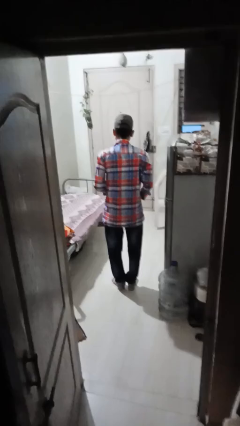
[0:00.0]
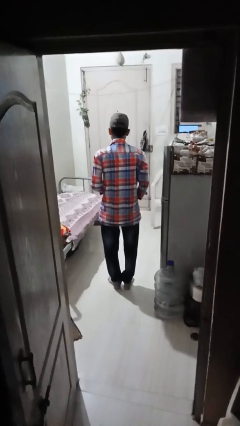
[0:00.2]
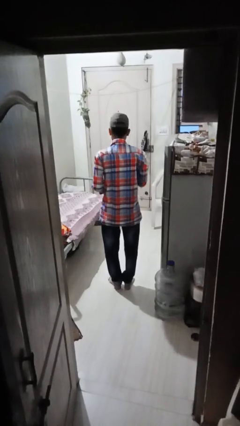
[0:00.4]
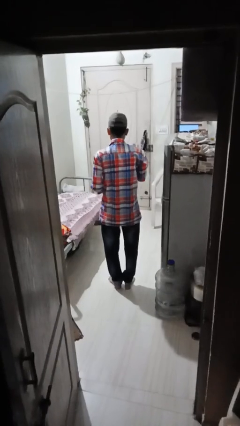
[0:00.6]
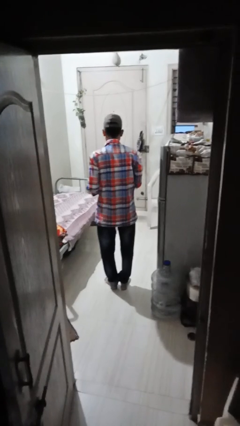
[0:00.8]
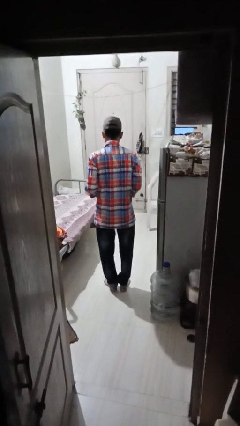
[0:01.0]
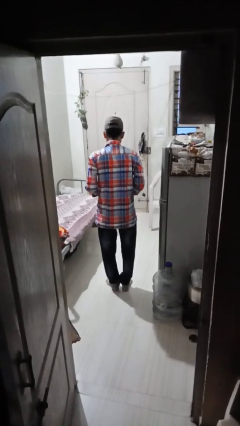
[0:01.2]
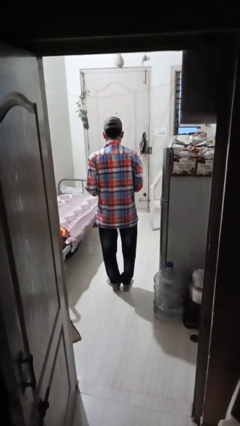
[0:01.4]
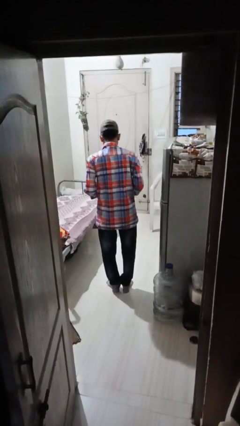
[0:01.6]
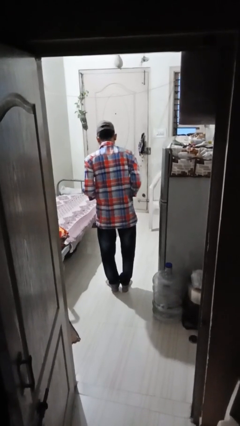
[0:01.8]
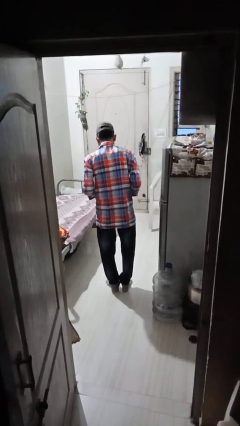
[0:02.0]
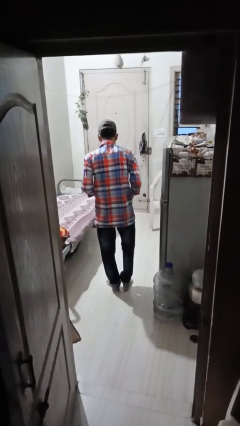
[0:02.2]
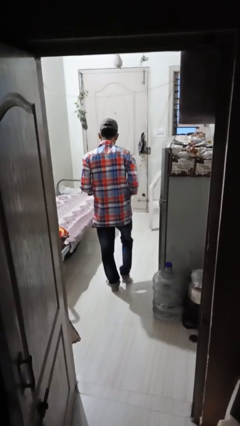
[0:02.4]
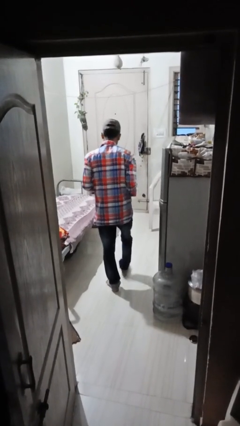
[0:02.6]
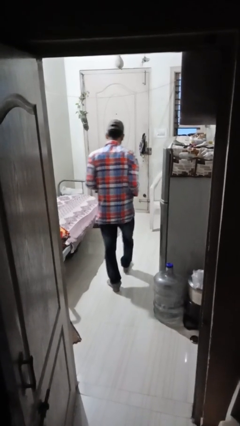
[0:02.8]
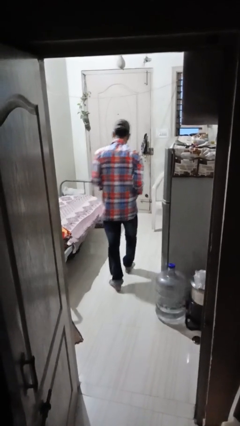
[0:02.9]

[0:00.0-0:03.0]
person throws object to ground

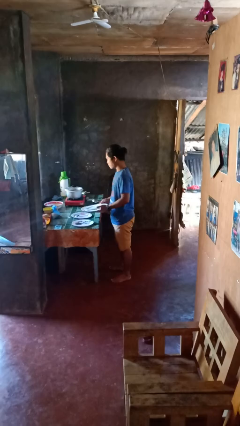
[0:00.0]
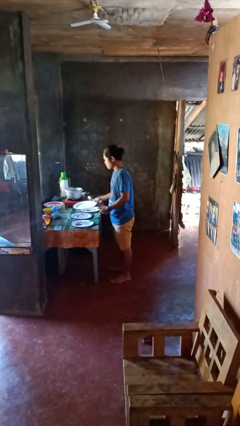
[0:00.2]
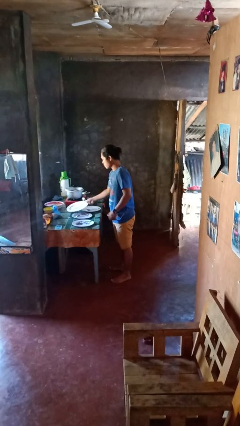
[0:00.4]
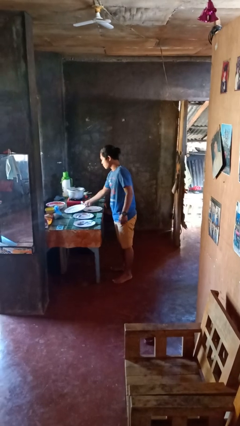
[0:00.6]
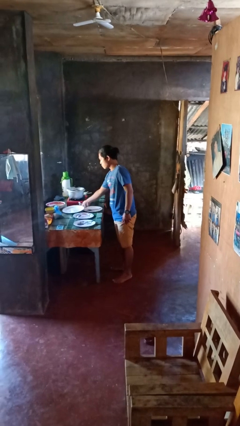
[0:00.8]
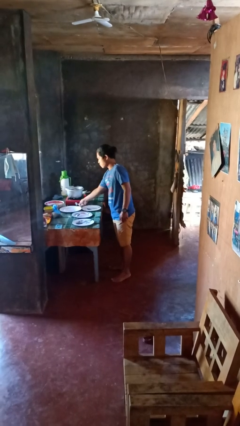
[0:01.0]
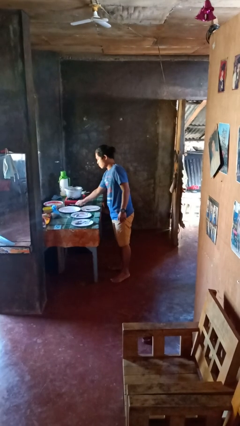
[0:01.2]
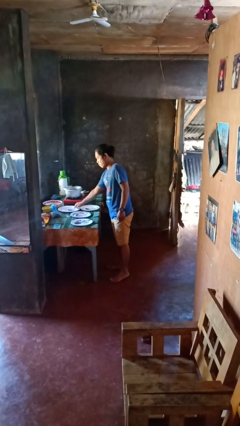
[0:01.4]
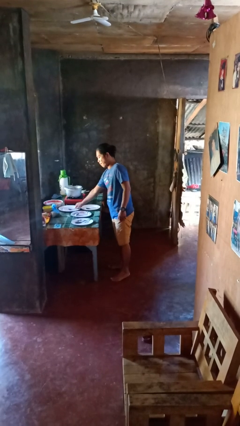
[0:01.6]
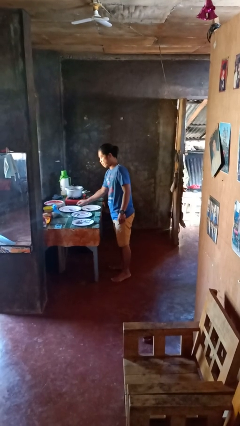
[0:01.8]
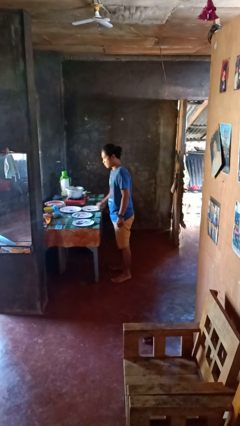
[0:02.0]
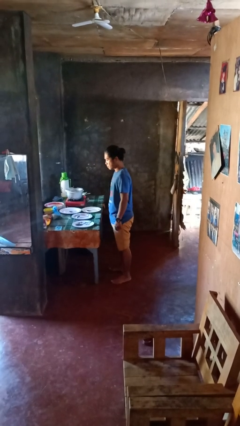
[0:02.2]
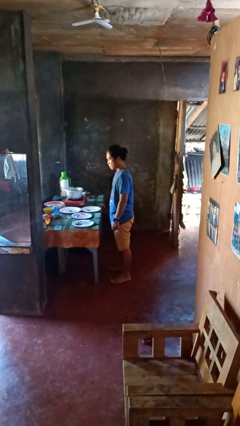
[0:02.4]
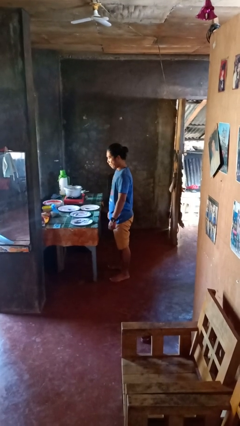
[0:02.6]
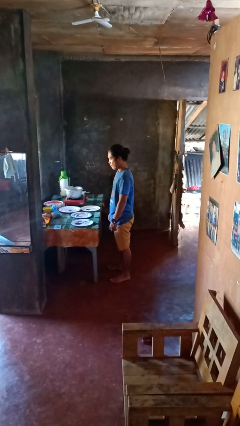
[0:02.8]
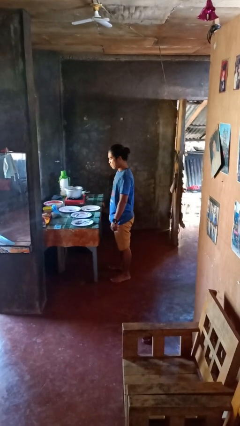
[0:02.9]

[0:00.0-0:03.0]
person sets table

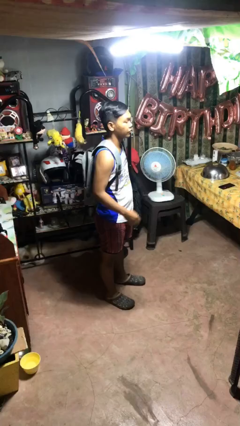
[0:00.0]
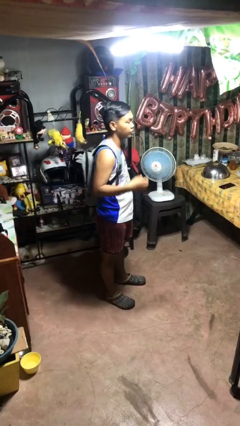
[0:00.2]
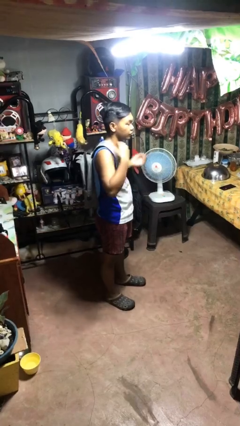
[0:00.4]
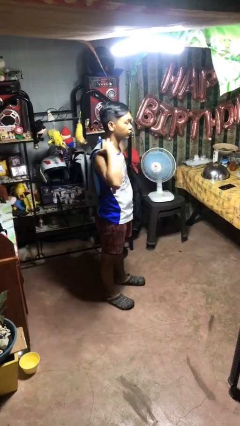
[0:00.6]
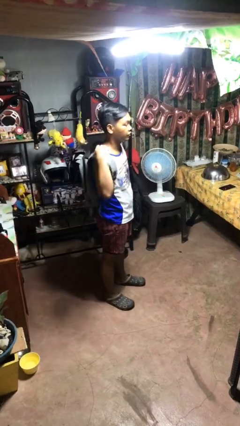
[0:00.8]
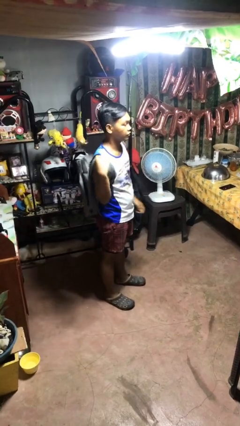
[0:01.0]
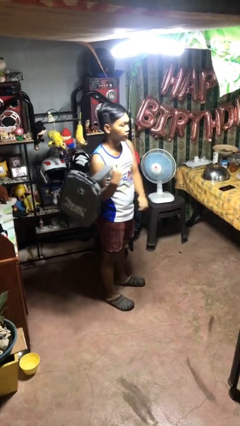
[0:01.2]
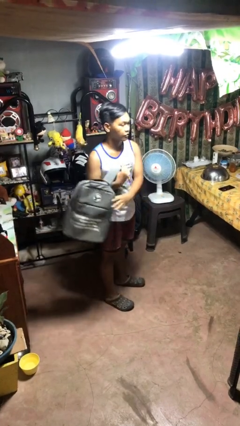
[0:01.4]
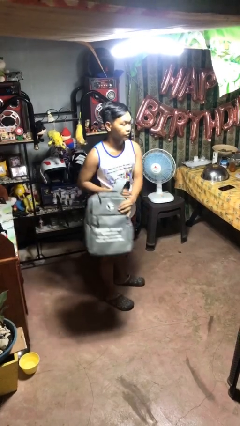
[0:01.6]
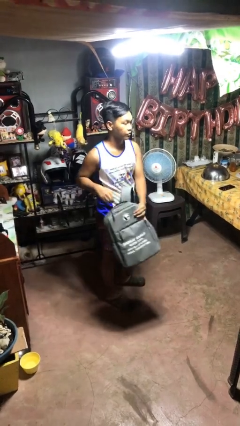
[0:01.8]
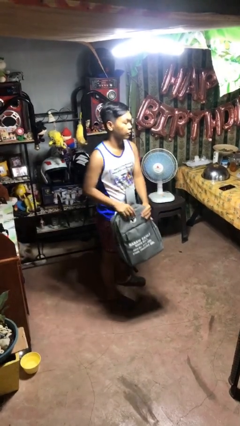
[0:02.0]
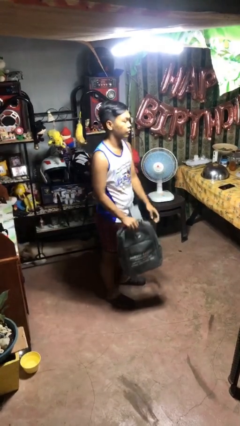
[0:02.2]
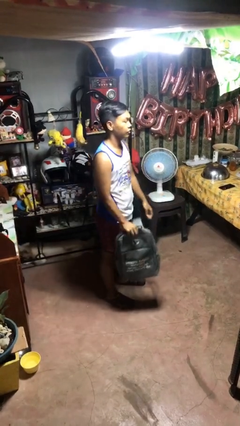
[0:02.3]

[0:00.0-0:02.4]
person takes off backpack

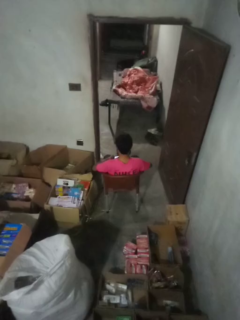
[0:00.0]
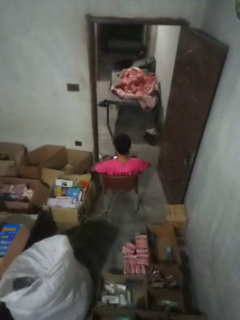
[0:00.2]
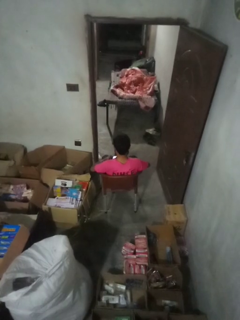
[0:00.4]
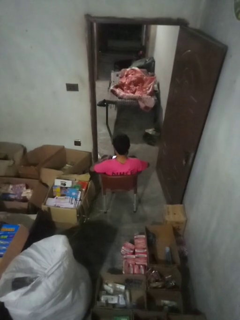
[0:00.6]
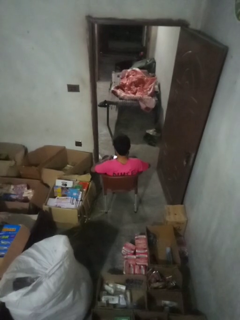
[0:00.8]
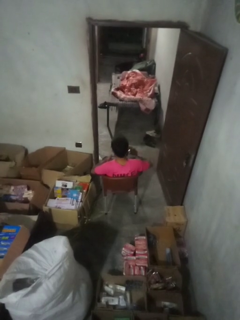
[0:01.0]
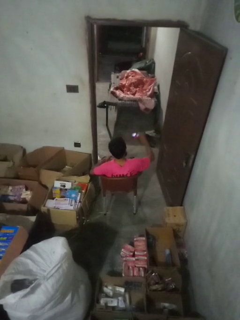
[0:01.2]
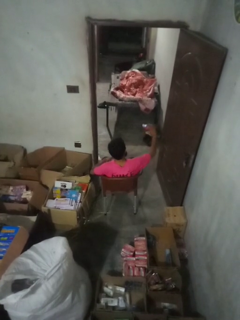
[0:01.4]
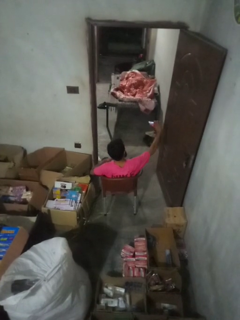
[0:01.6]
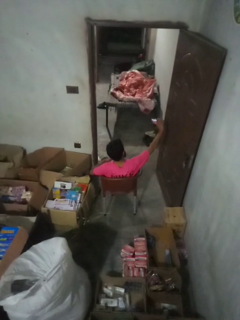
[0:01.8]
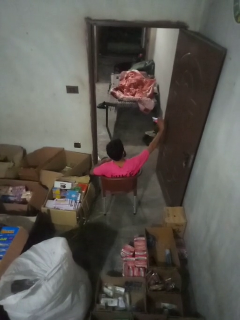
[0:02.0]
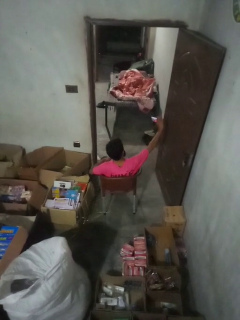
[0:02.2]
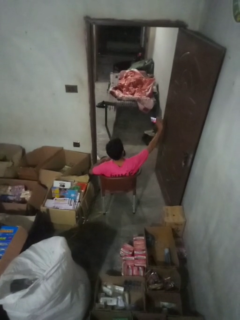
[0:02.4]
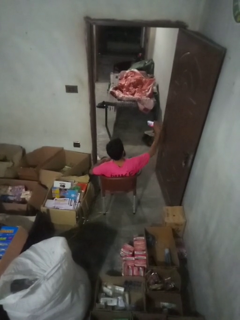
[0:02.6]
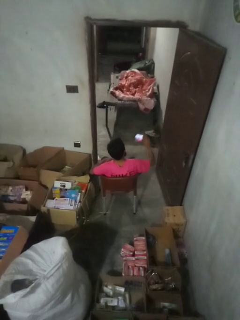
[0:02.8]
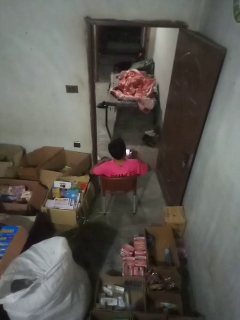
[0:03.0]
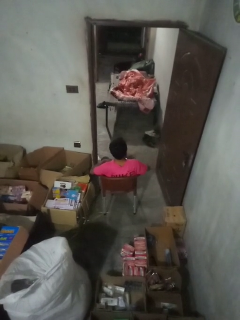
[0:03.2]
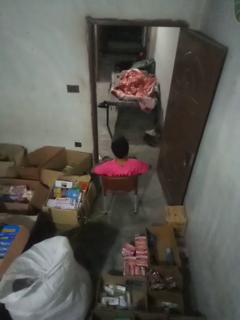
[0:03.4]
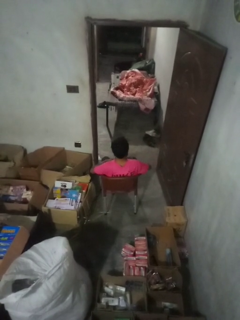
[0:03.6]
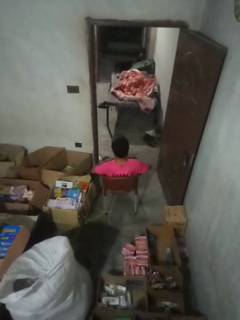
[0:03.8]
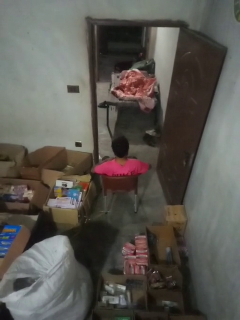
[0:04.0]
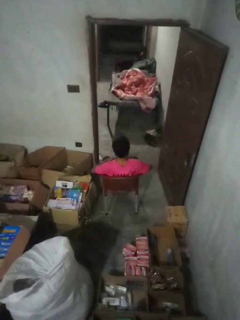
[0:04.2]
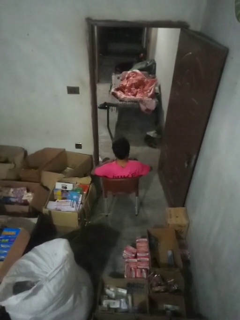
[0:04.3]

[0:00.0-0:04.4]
person takes selfie

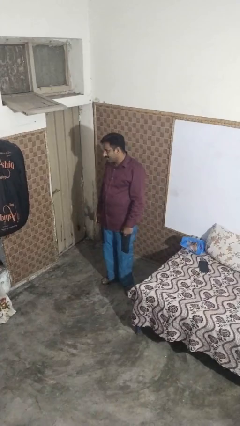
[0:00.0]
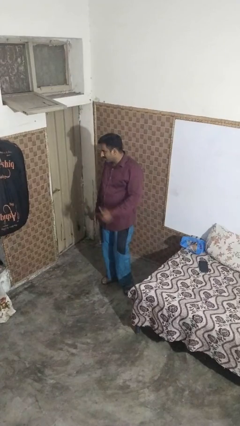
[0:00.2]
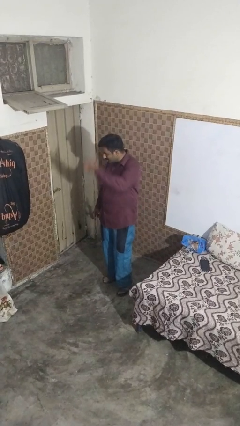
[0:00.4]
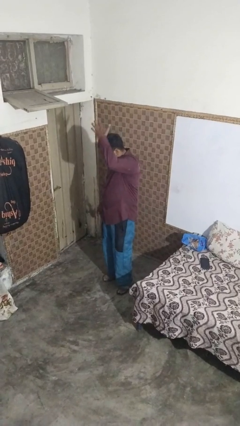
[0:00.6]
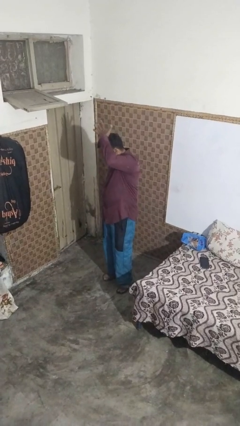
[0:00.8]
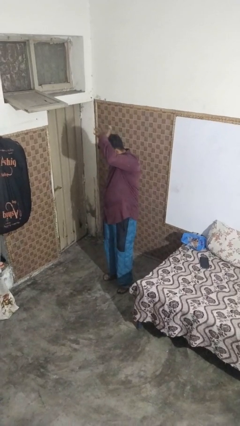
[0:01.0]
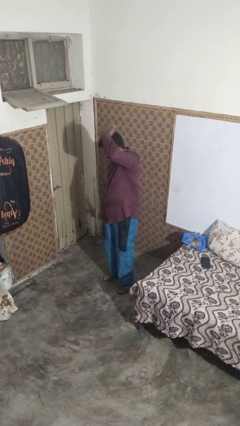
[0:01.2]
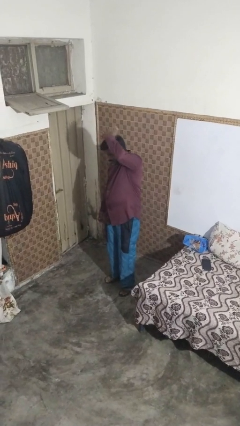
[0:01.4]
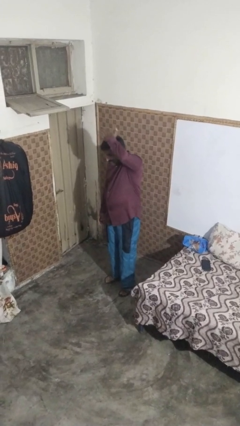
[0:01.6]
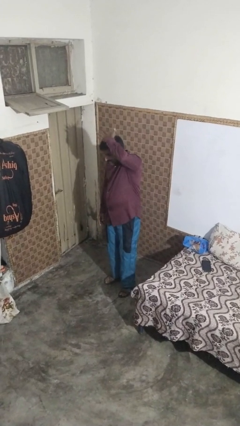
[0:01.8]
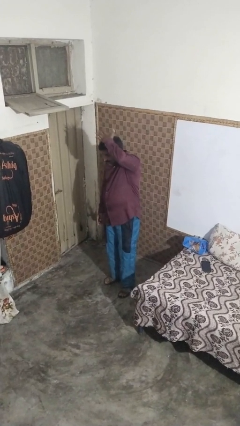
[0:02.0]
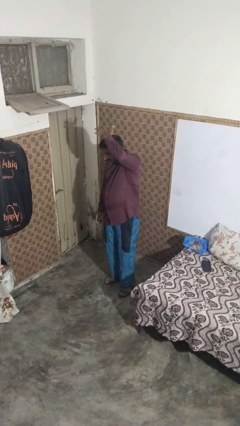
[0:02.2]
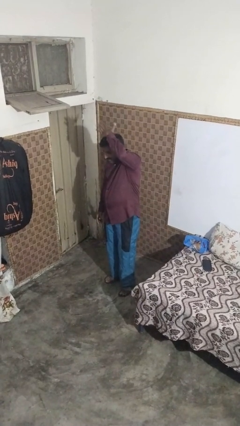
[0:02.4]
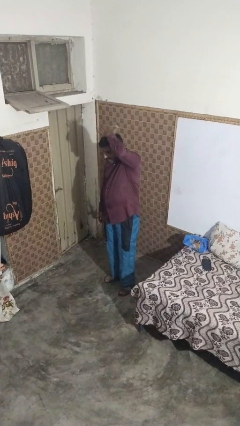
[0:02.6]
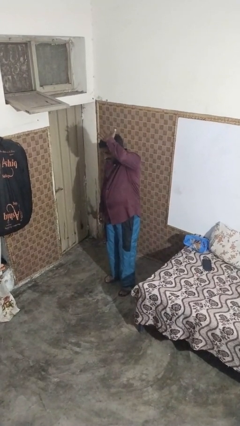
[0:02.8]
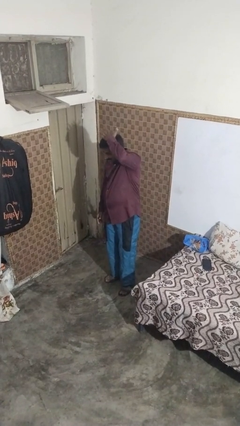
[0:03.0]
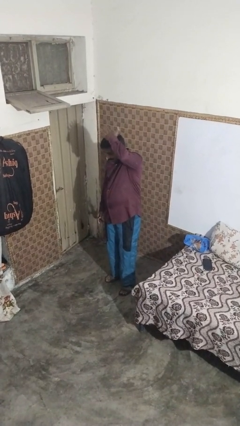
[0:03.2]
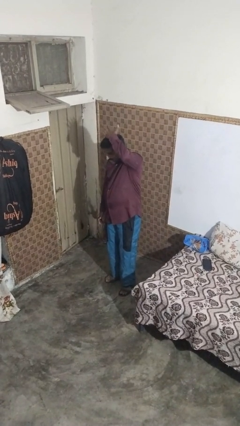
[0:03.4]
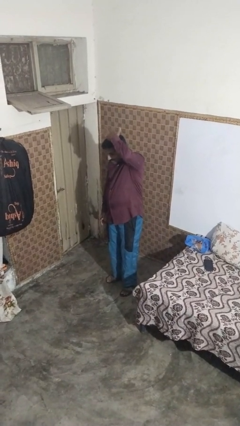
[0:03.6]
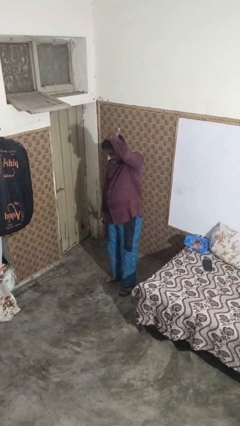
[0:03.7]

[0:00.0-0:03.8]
person pats head

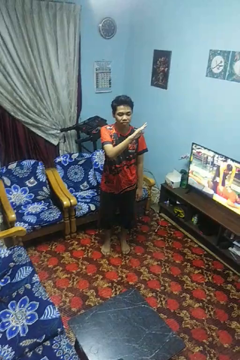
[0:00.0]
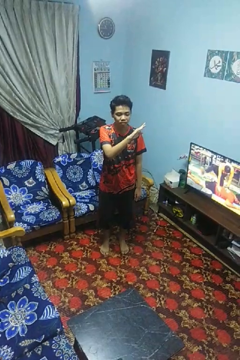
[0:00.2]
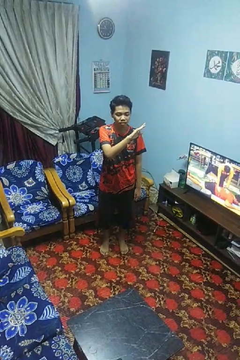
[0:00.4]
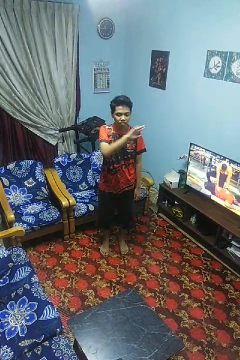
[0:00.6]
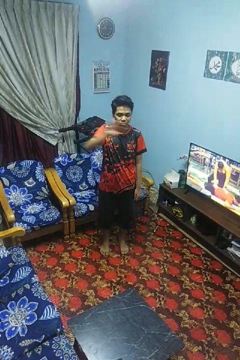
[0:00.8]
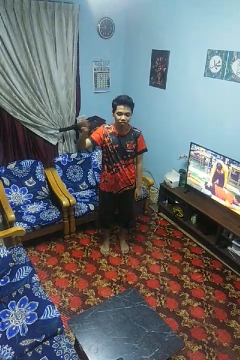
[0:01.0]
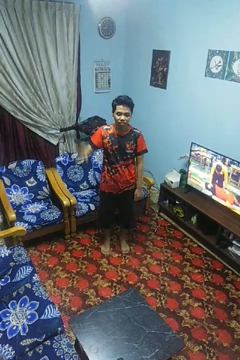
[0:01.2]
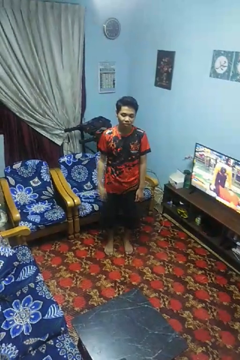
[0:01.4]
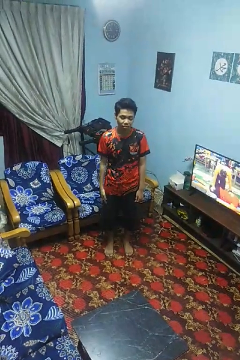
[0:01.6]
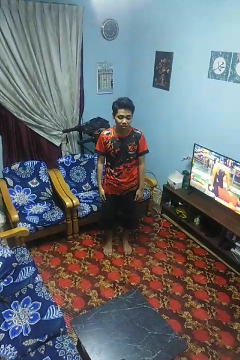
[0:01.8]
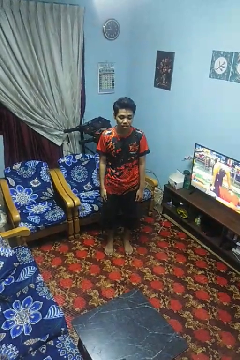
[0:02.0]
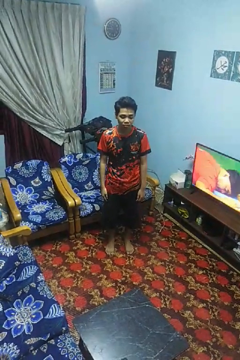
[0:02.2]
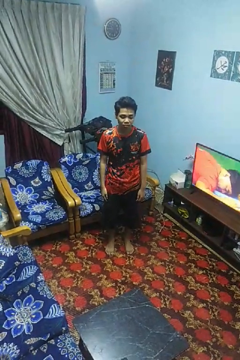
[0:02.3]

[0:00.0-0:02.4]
person gestures swipe right
